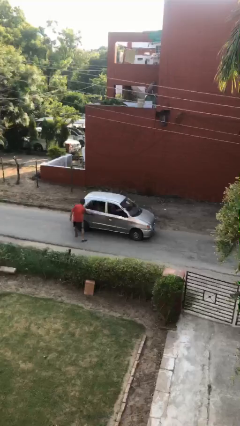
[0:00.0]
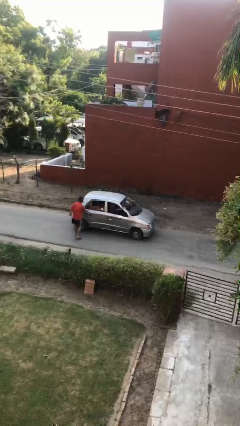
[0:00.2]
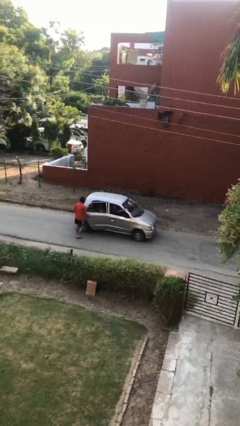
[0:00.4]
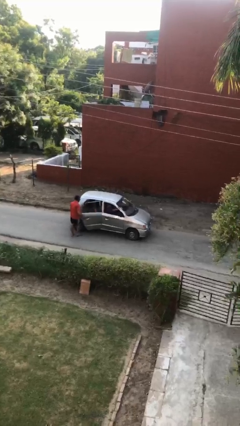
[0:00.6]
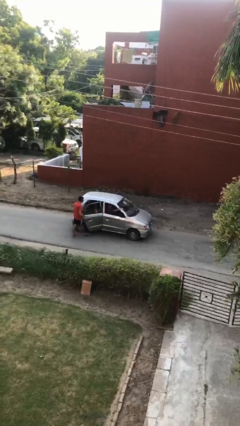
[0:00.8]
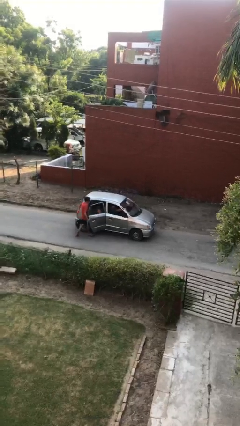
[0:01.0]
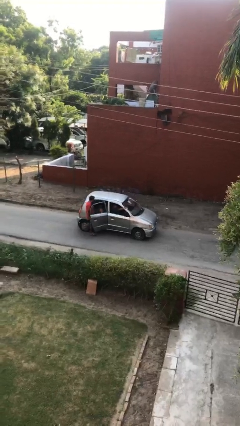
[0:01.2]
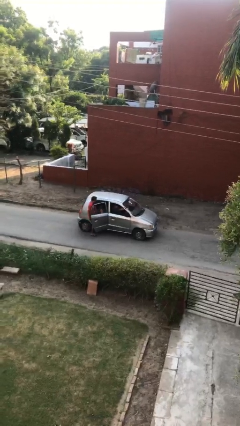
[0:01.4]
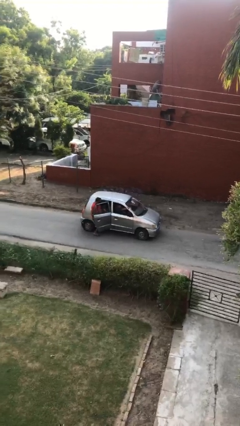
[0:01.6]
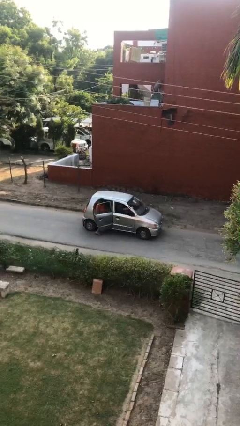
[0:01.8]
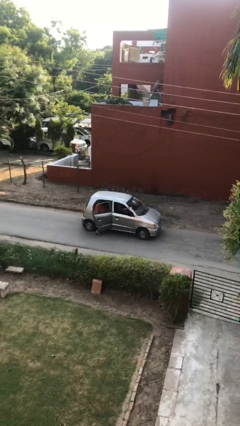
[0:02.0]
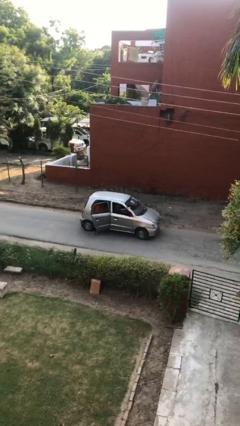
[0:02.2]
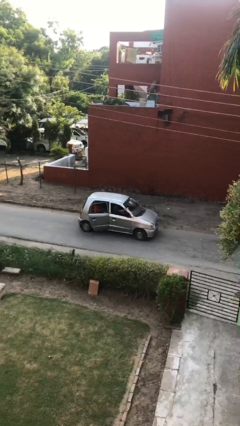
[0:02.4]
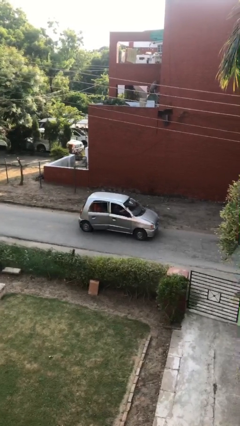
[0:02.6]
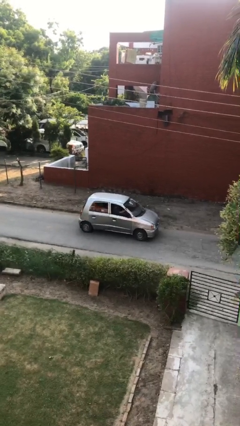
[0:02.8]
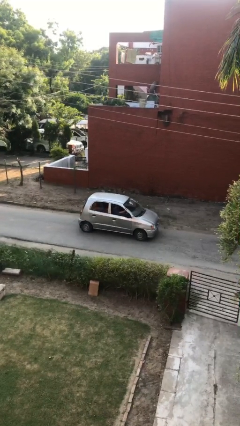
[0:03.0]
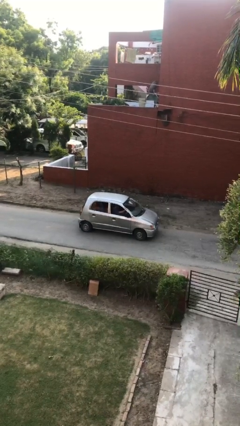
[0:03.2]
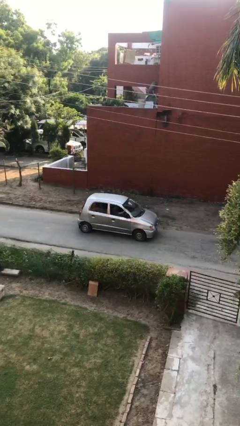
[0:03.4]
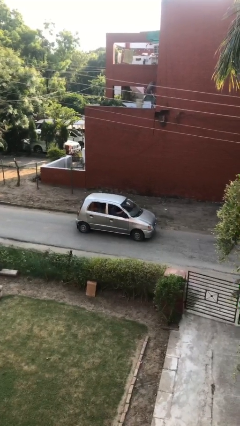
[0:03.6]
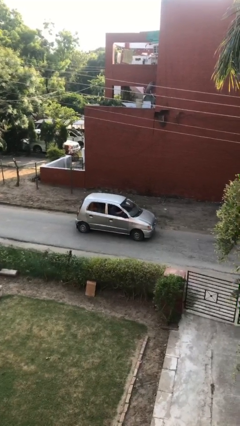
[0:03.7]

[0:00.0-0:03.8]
car picks up person

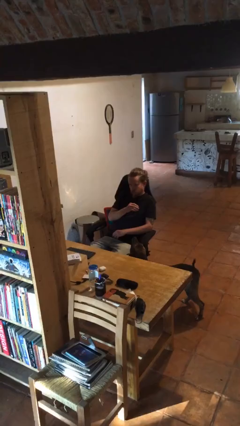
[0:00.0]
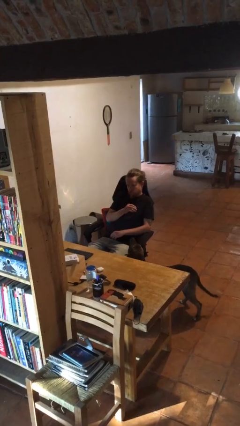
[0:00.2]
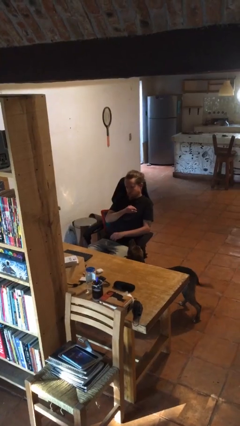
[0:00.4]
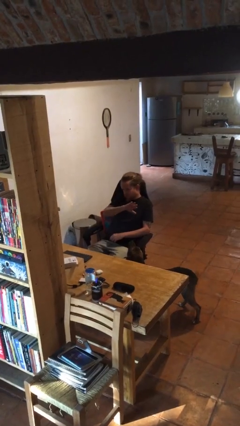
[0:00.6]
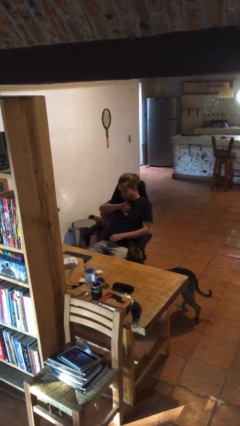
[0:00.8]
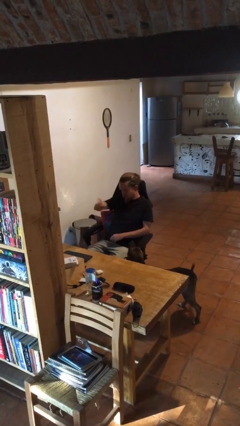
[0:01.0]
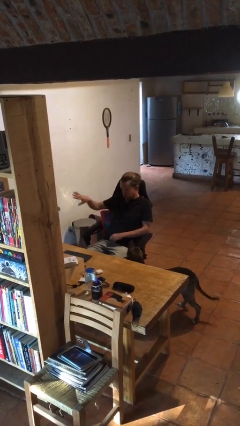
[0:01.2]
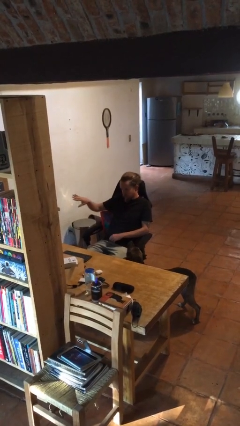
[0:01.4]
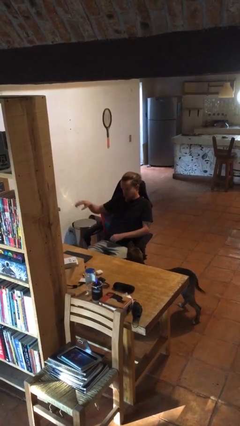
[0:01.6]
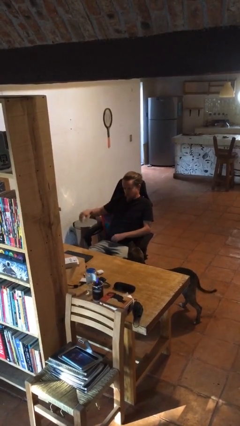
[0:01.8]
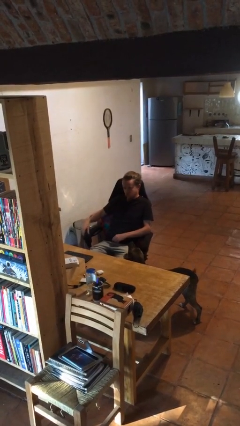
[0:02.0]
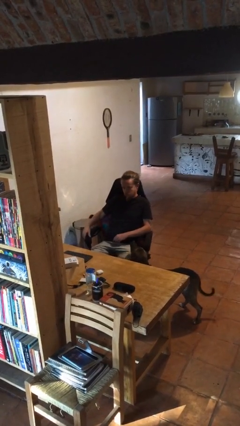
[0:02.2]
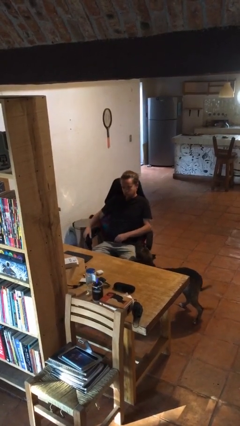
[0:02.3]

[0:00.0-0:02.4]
person gestures swipe right

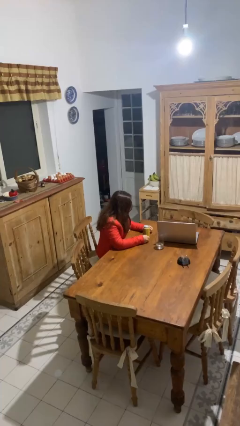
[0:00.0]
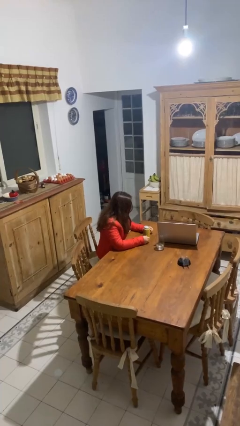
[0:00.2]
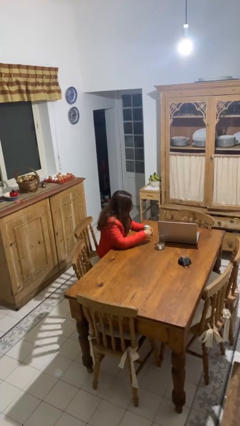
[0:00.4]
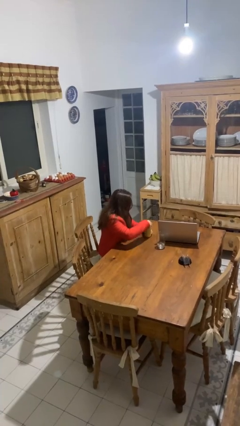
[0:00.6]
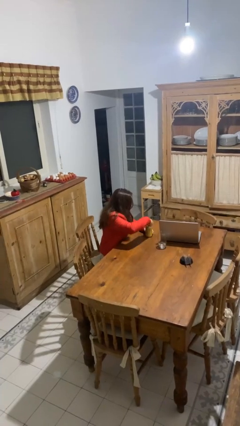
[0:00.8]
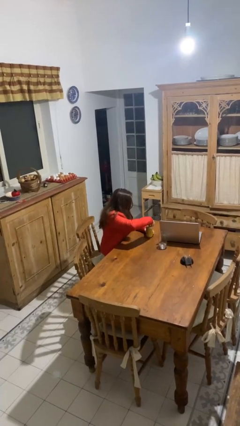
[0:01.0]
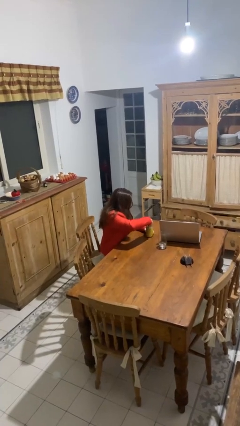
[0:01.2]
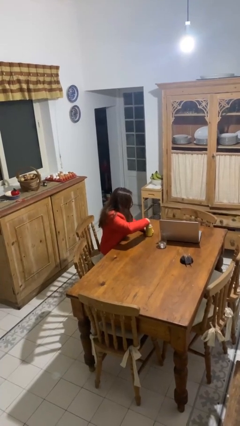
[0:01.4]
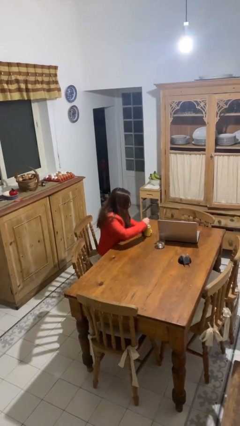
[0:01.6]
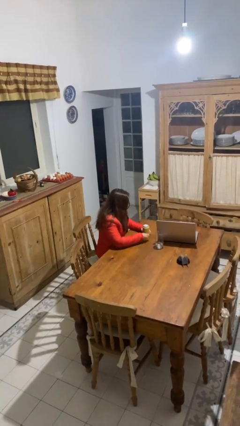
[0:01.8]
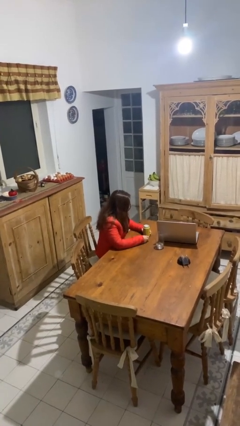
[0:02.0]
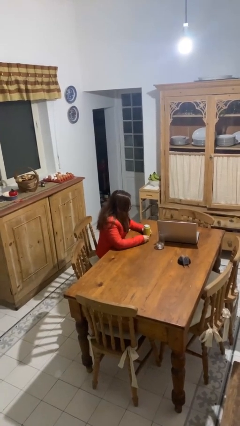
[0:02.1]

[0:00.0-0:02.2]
person opens beverage can

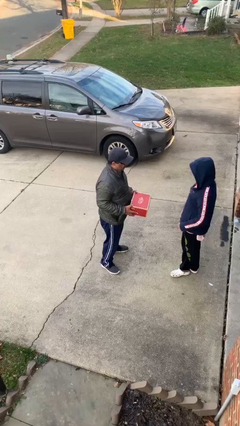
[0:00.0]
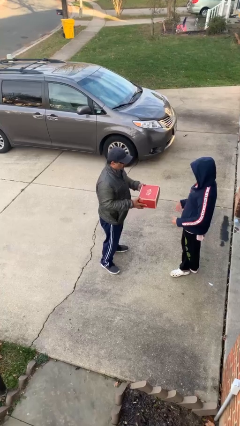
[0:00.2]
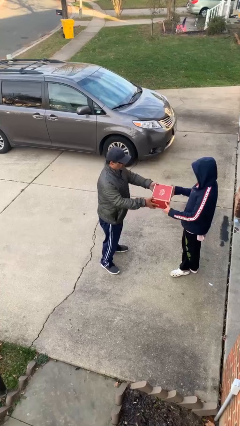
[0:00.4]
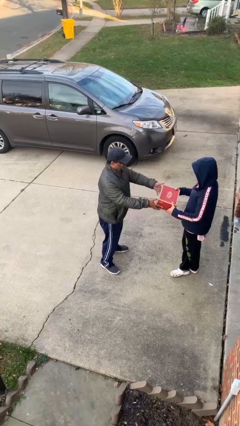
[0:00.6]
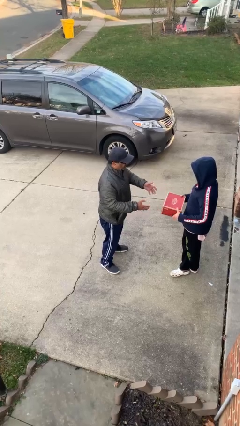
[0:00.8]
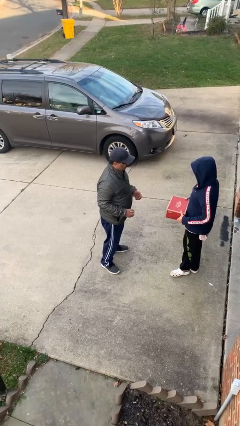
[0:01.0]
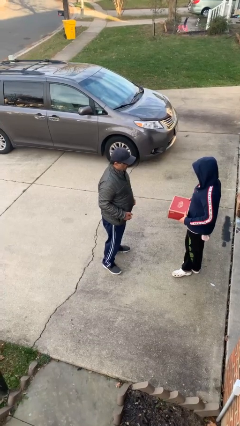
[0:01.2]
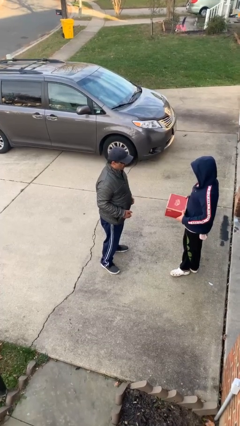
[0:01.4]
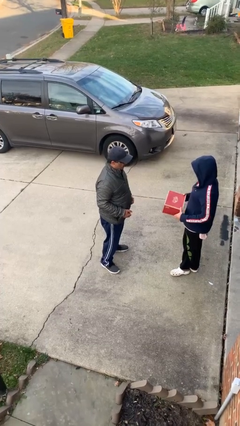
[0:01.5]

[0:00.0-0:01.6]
person transfers object to person

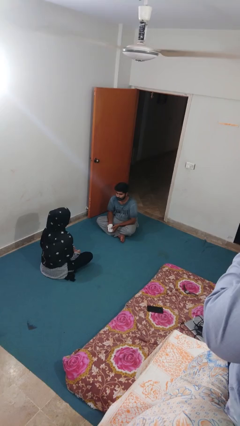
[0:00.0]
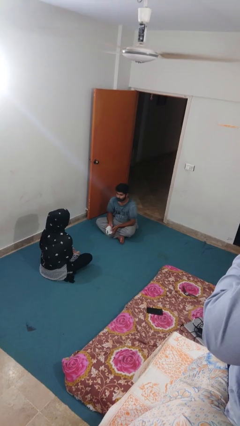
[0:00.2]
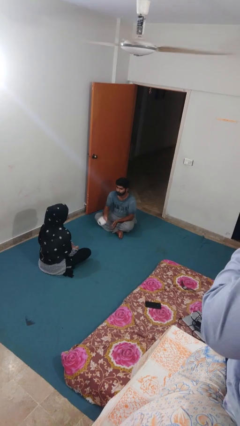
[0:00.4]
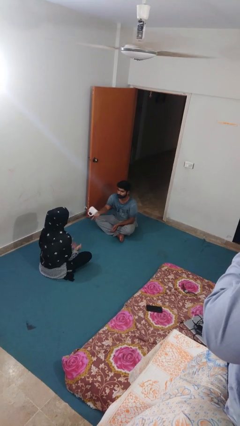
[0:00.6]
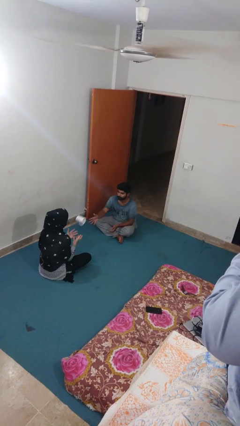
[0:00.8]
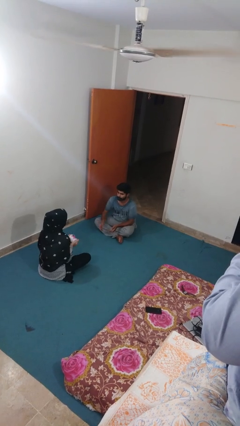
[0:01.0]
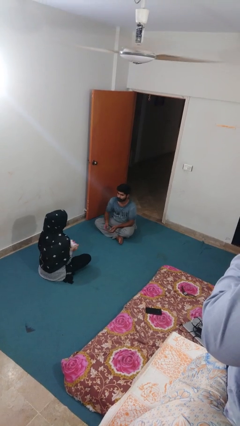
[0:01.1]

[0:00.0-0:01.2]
person throws object to person

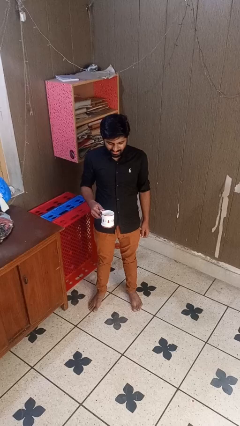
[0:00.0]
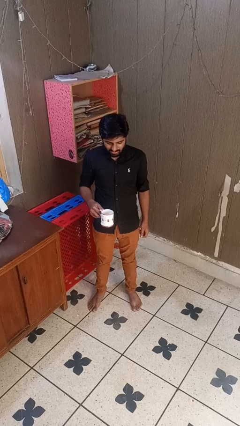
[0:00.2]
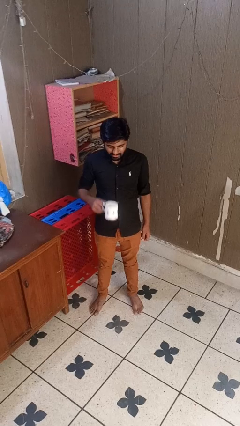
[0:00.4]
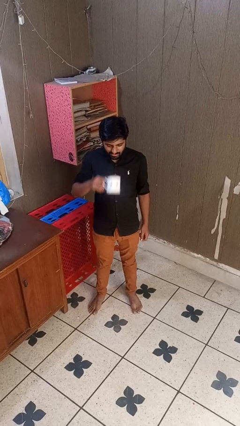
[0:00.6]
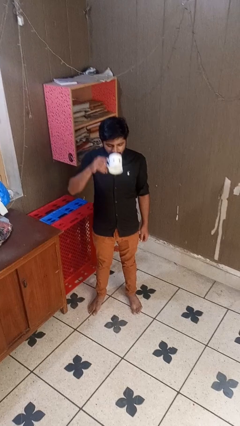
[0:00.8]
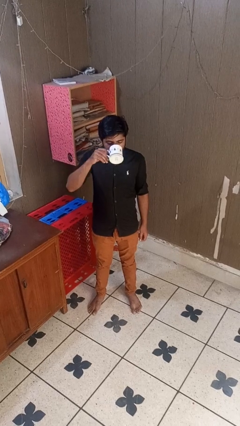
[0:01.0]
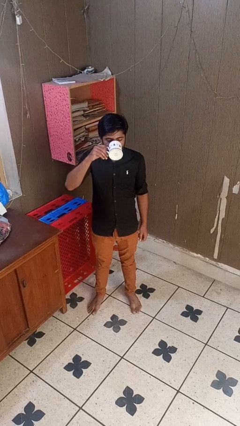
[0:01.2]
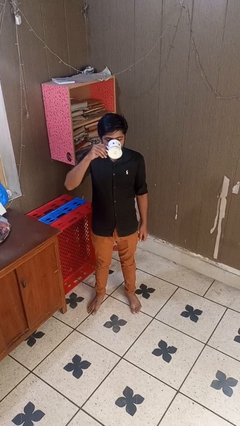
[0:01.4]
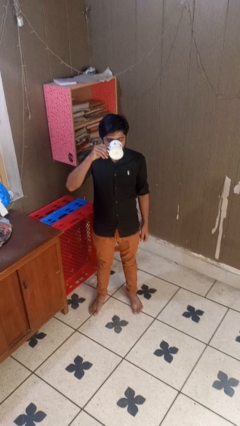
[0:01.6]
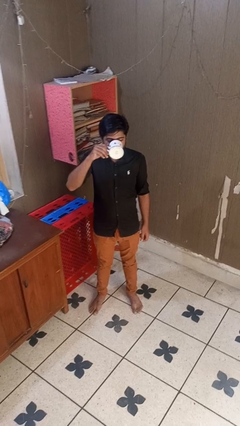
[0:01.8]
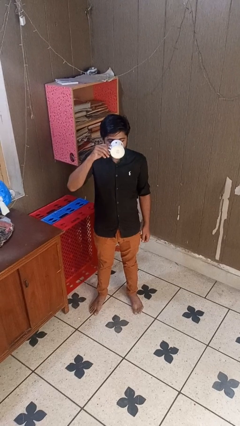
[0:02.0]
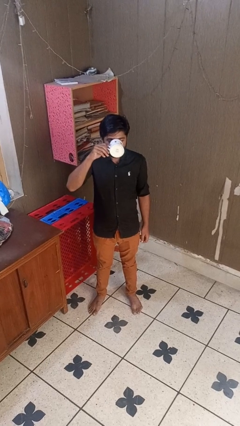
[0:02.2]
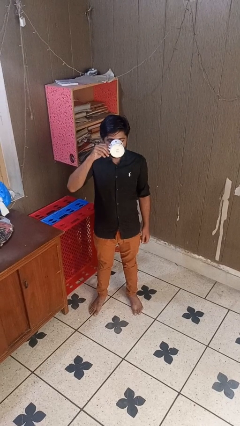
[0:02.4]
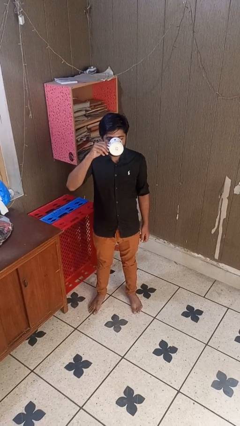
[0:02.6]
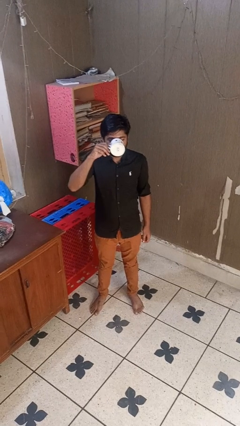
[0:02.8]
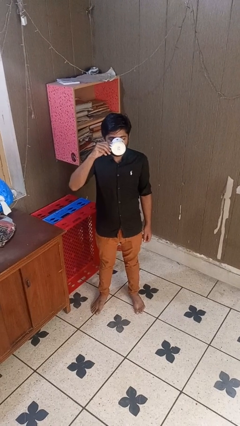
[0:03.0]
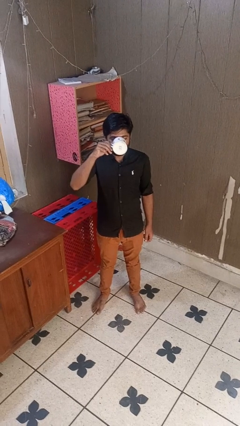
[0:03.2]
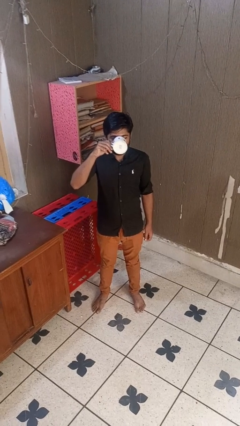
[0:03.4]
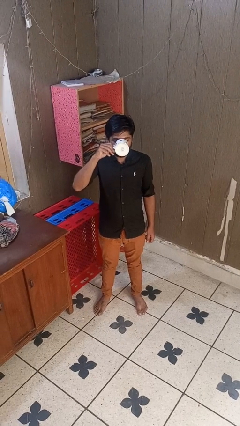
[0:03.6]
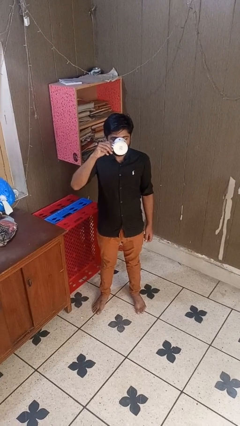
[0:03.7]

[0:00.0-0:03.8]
person drinks from mug

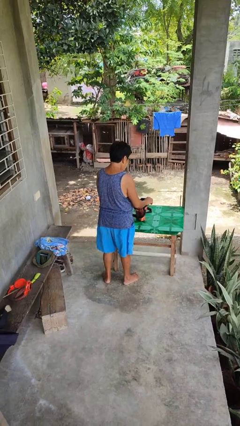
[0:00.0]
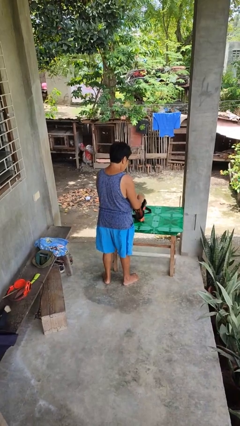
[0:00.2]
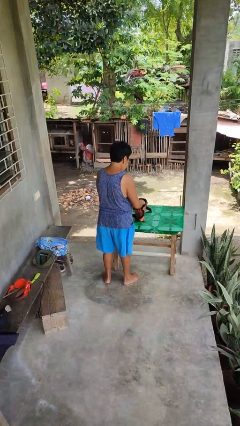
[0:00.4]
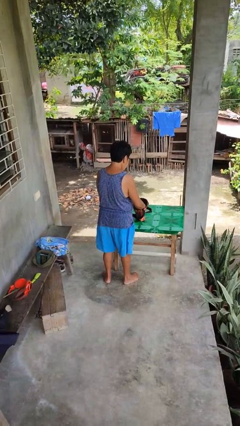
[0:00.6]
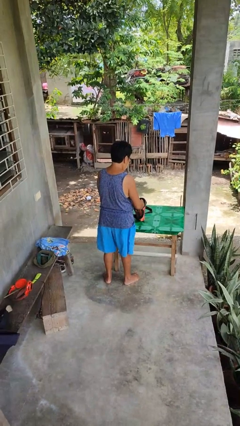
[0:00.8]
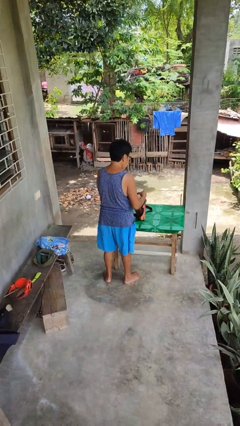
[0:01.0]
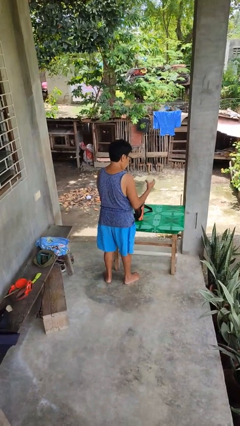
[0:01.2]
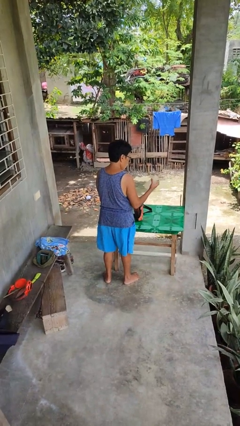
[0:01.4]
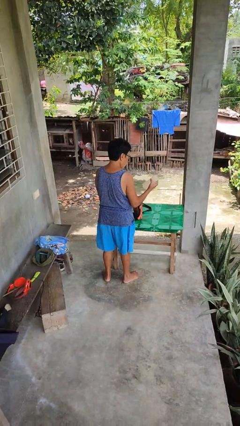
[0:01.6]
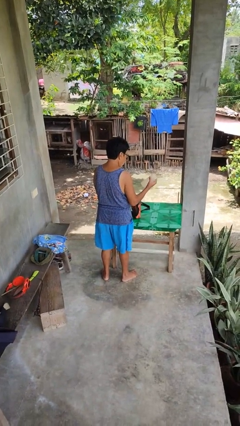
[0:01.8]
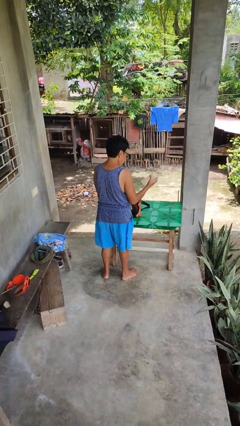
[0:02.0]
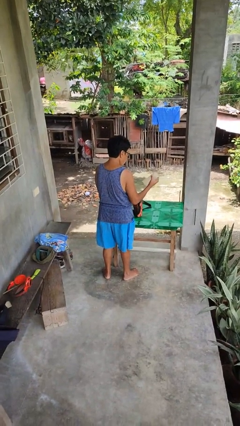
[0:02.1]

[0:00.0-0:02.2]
person takes object from purse
